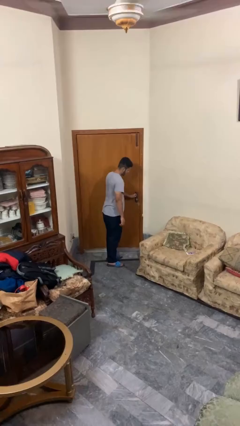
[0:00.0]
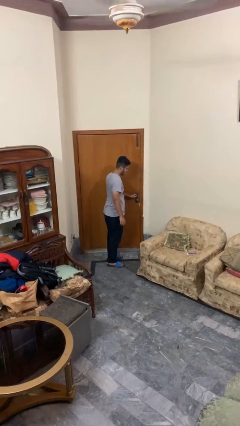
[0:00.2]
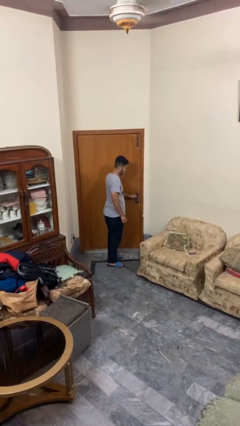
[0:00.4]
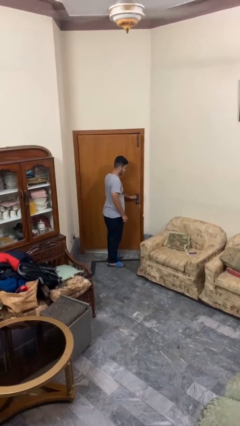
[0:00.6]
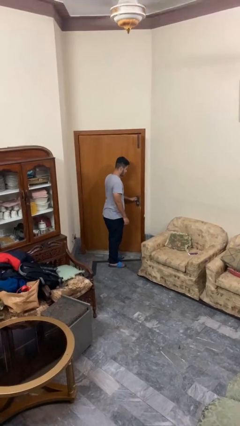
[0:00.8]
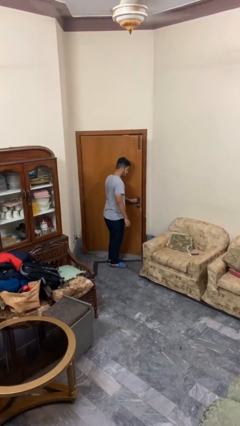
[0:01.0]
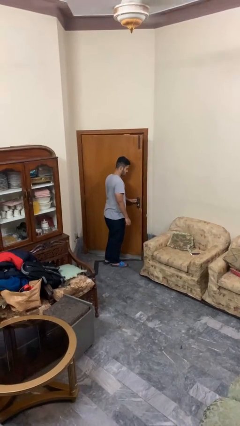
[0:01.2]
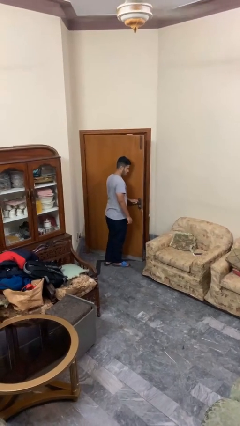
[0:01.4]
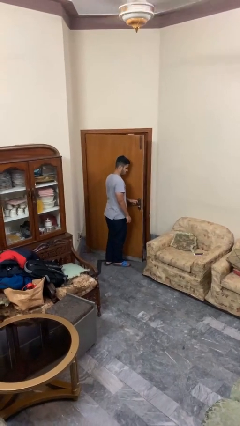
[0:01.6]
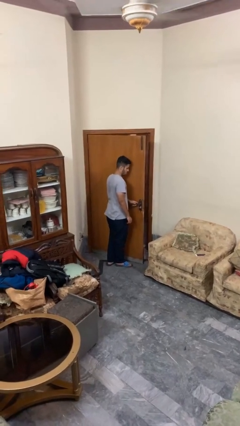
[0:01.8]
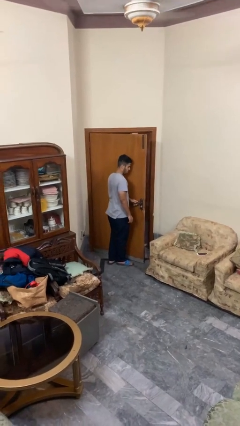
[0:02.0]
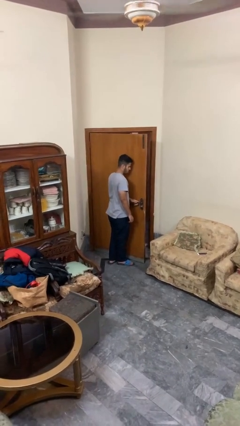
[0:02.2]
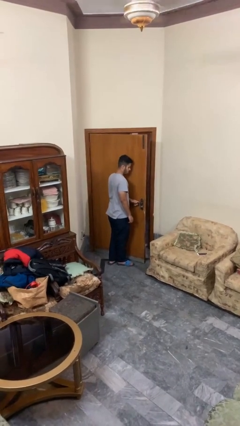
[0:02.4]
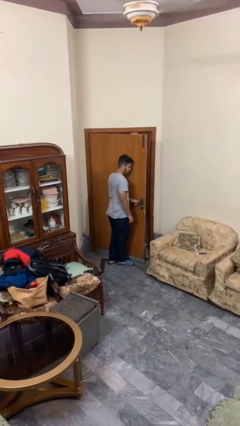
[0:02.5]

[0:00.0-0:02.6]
person opens facility door

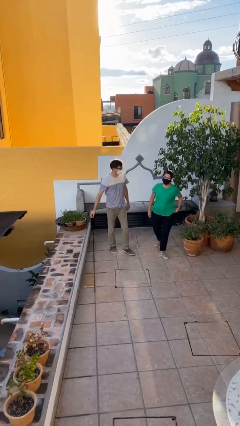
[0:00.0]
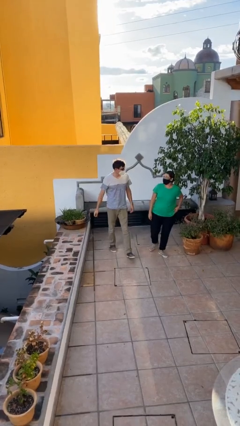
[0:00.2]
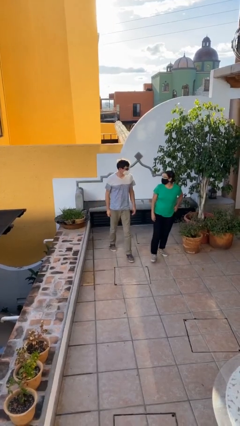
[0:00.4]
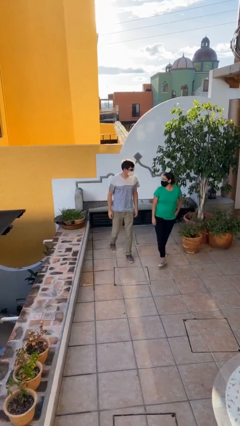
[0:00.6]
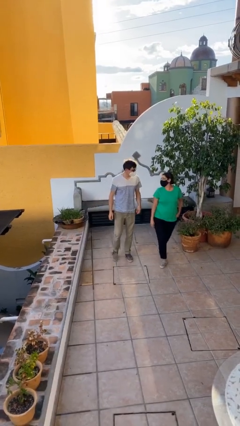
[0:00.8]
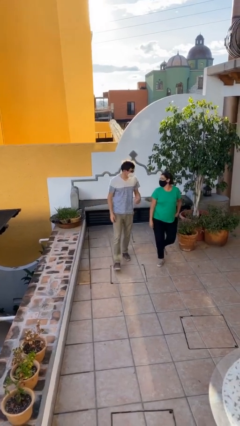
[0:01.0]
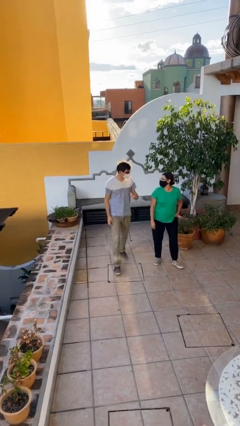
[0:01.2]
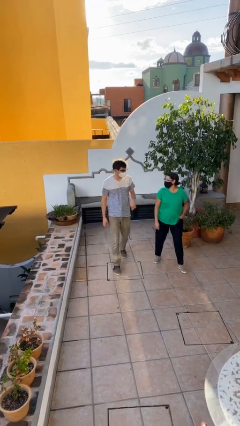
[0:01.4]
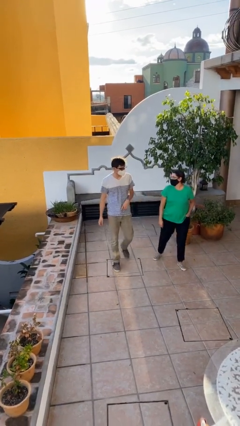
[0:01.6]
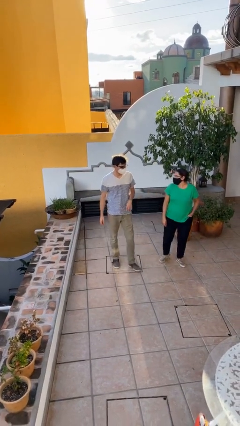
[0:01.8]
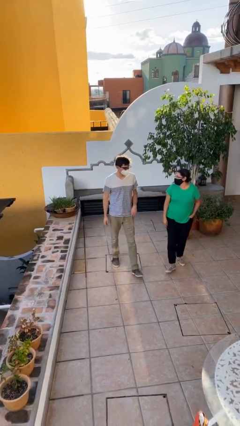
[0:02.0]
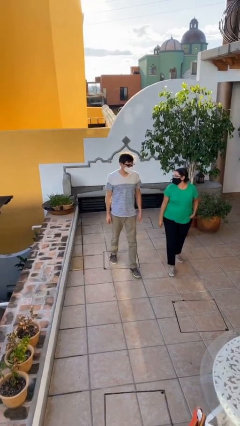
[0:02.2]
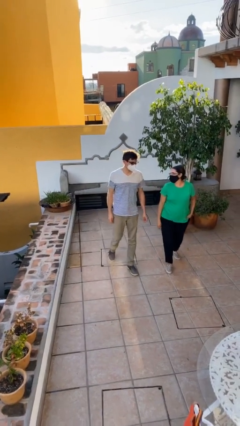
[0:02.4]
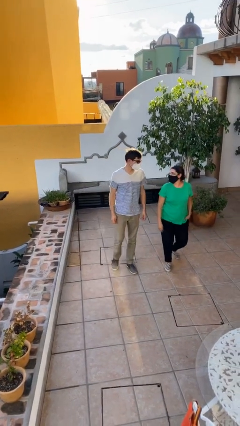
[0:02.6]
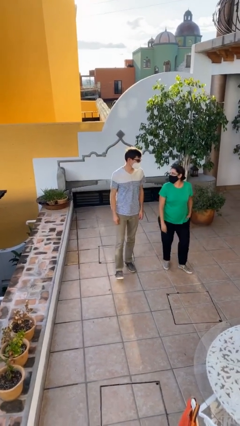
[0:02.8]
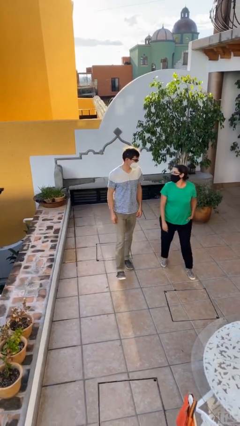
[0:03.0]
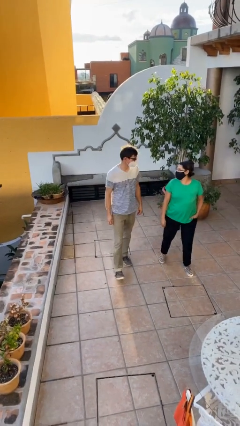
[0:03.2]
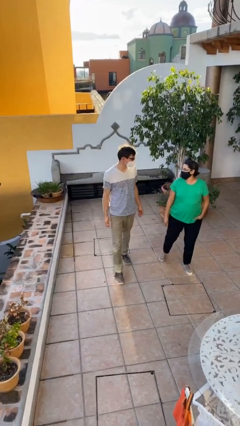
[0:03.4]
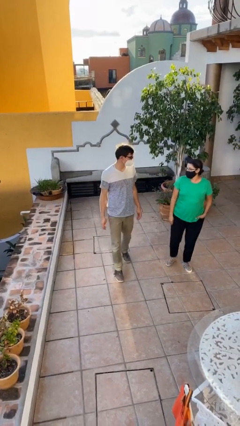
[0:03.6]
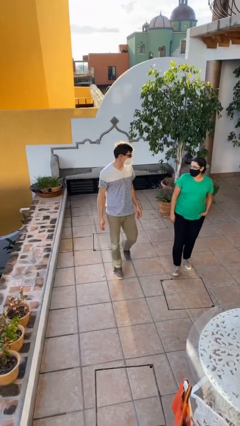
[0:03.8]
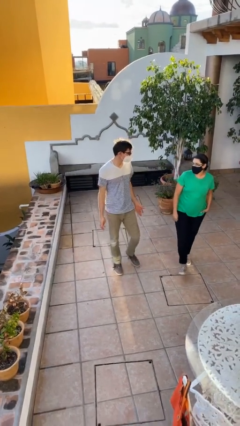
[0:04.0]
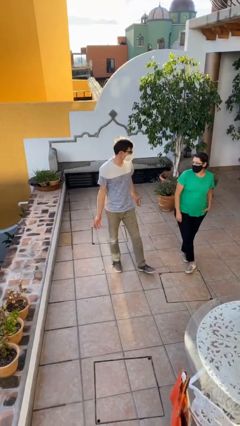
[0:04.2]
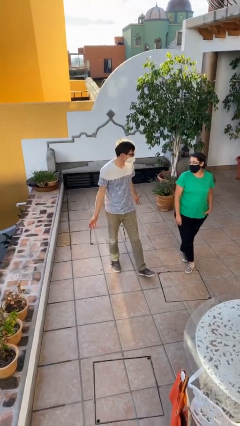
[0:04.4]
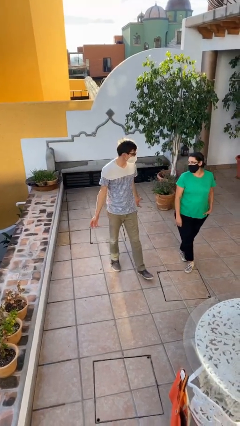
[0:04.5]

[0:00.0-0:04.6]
person talks to person

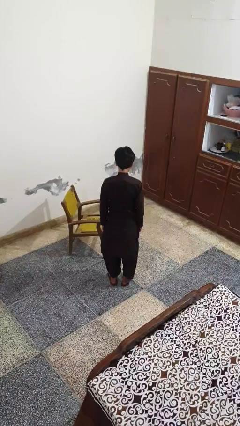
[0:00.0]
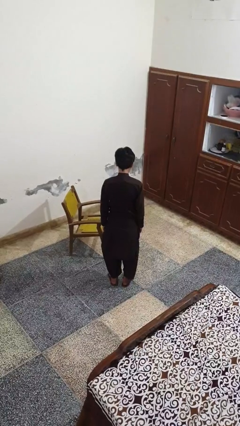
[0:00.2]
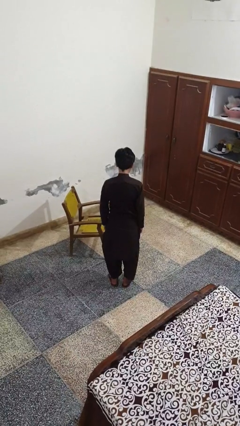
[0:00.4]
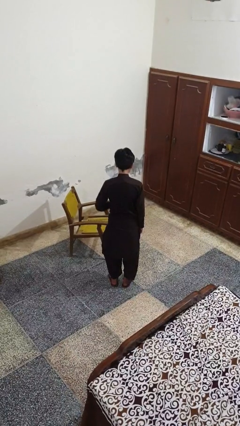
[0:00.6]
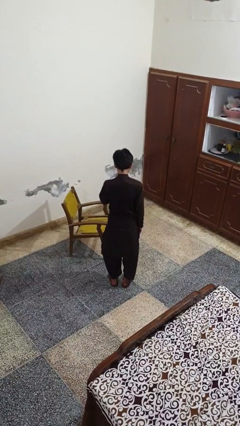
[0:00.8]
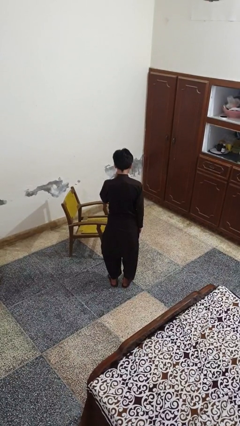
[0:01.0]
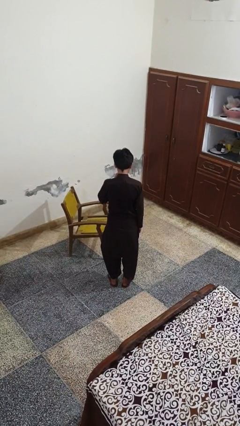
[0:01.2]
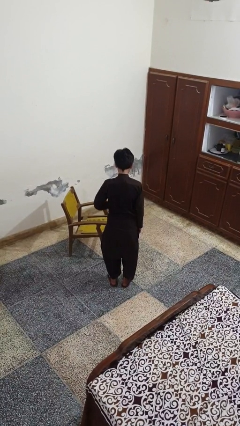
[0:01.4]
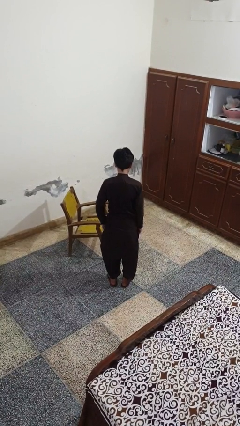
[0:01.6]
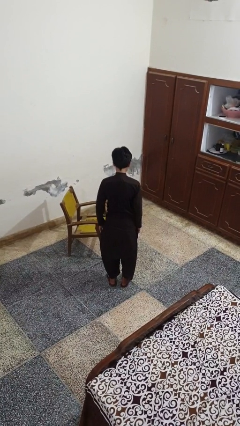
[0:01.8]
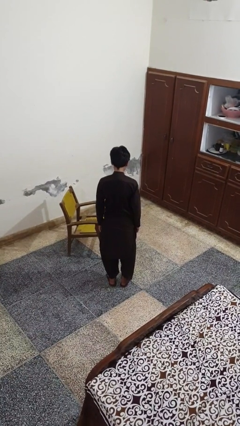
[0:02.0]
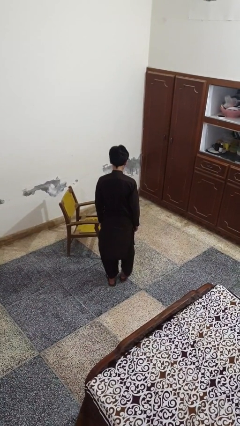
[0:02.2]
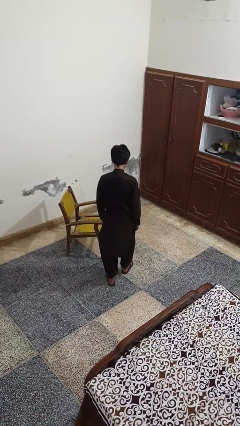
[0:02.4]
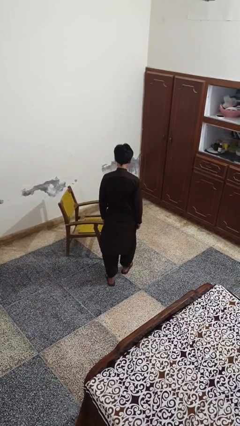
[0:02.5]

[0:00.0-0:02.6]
person puts phone into pocket

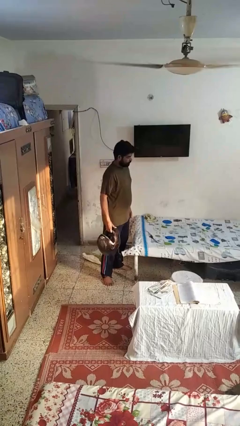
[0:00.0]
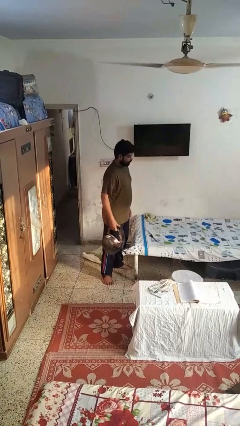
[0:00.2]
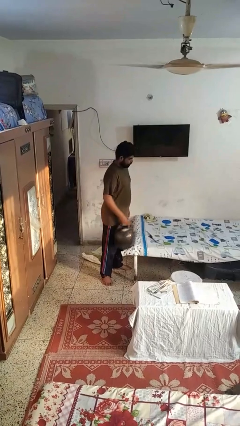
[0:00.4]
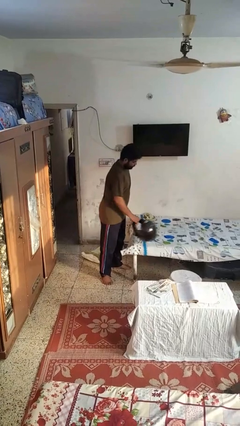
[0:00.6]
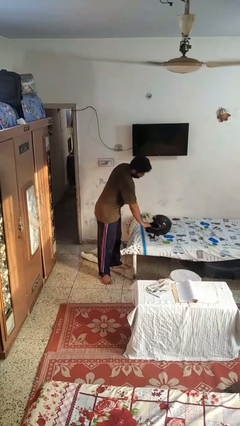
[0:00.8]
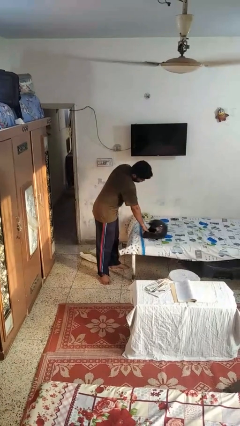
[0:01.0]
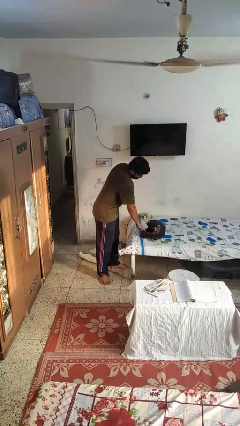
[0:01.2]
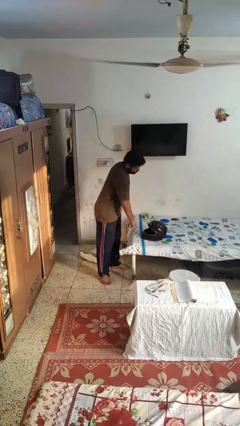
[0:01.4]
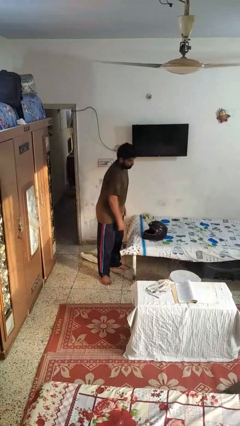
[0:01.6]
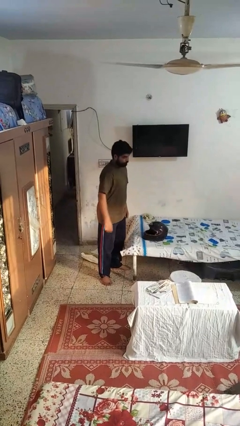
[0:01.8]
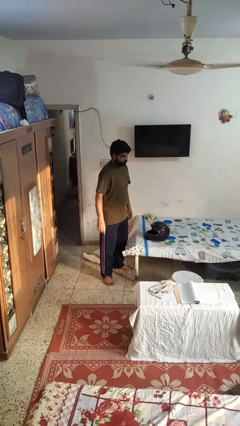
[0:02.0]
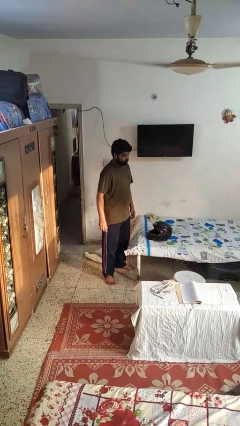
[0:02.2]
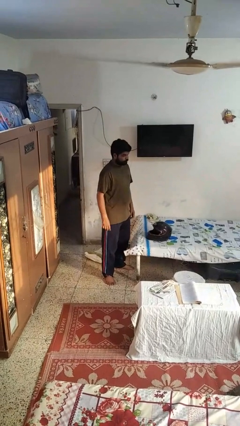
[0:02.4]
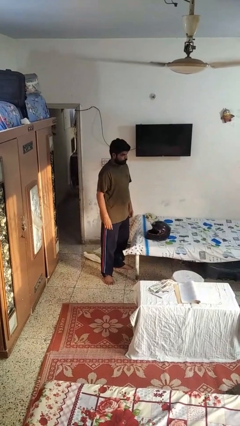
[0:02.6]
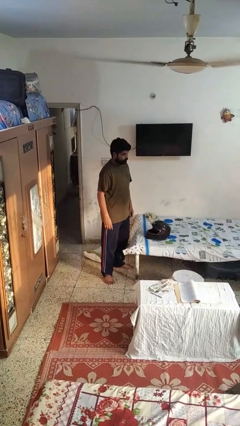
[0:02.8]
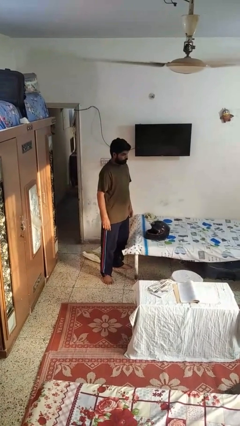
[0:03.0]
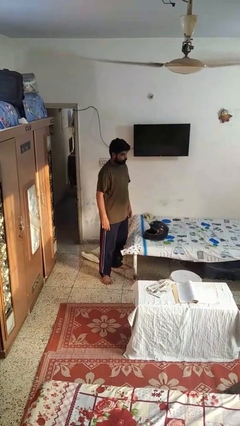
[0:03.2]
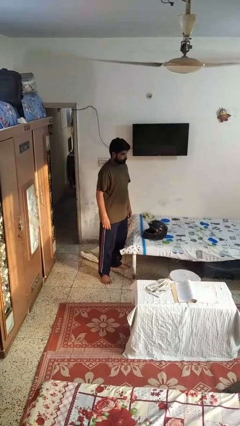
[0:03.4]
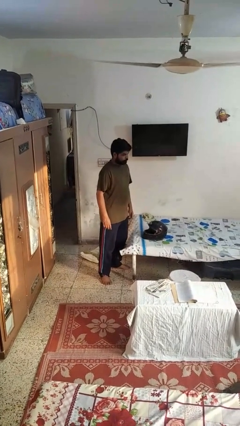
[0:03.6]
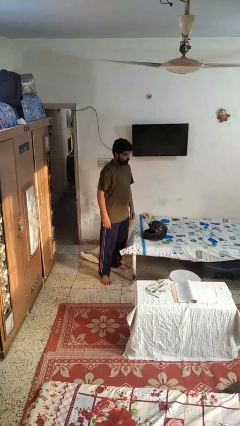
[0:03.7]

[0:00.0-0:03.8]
person puts down object on bed

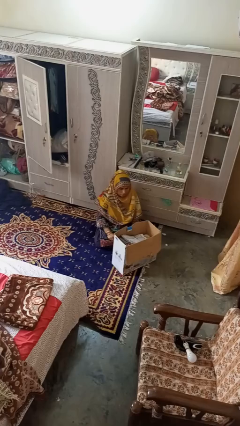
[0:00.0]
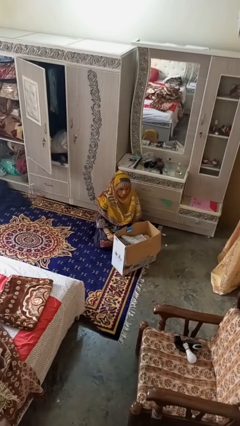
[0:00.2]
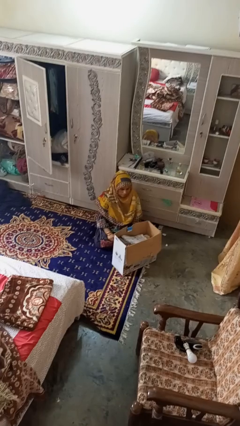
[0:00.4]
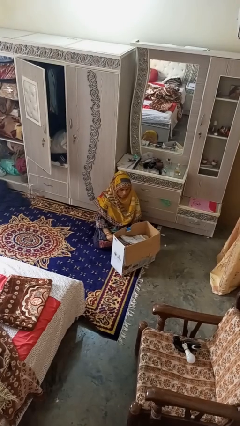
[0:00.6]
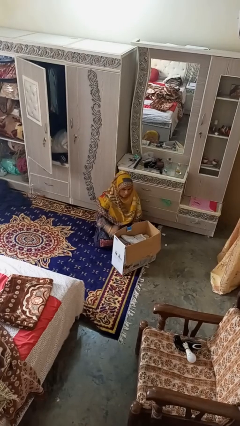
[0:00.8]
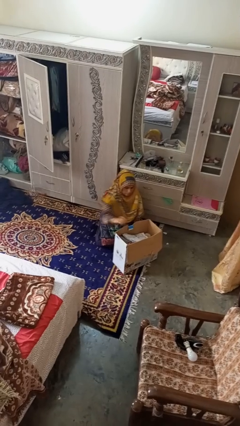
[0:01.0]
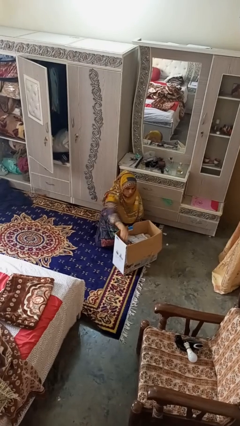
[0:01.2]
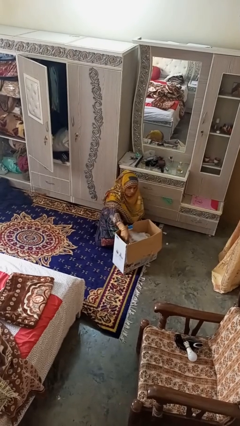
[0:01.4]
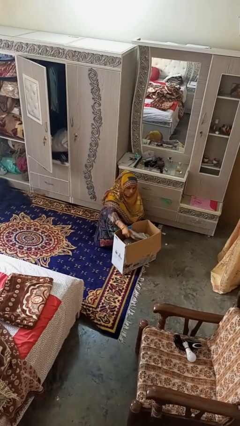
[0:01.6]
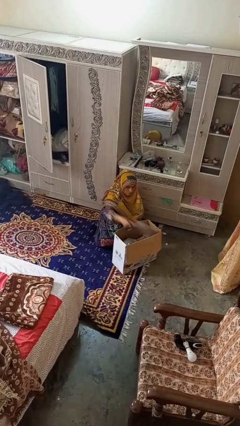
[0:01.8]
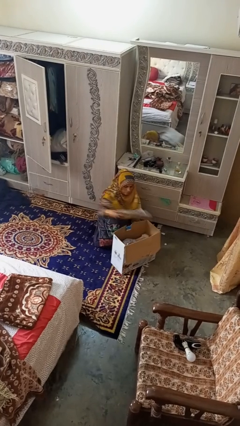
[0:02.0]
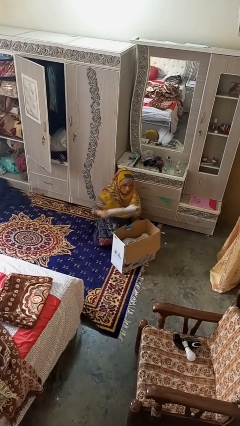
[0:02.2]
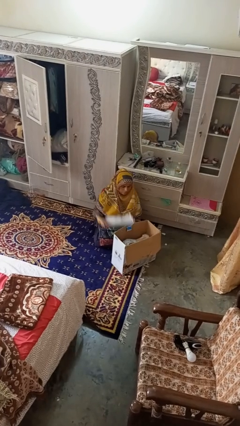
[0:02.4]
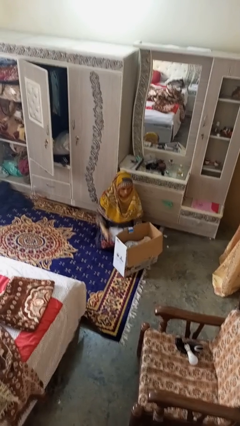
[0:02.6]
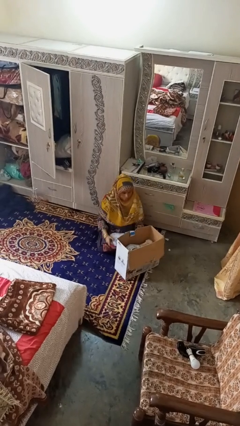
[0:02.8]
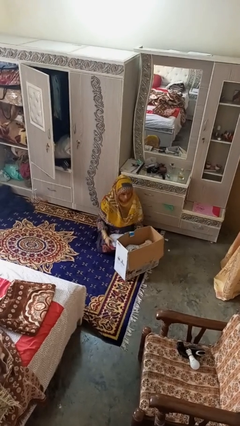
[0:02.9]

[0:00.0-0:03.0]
person takes object from box

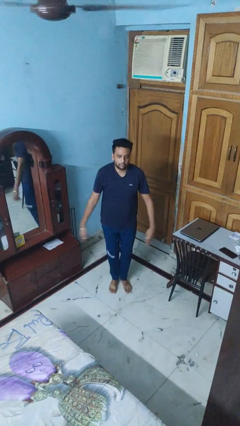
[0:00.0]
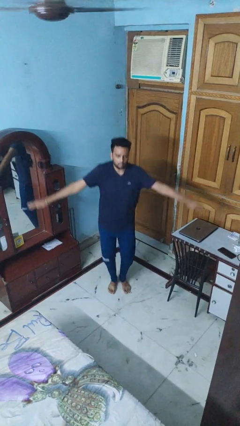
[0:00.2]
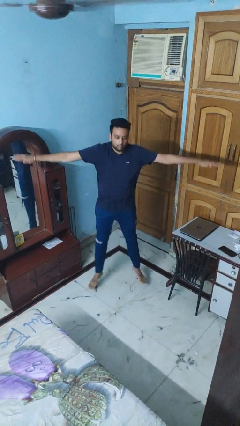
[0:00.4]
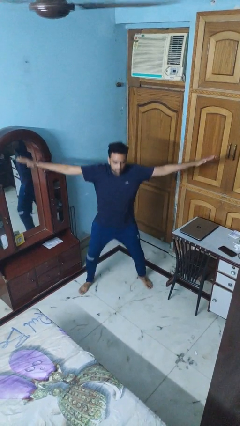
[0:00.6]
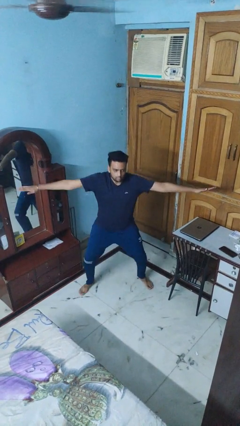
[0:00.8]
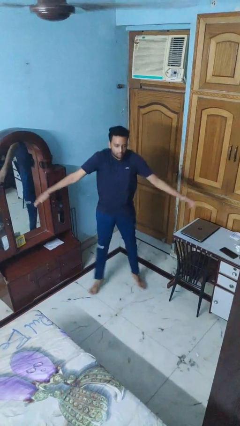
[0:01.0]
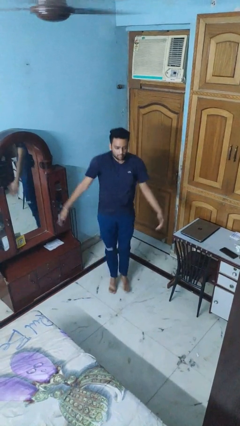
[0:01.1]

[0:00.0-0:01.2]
person exercises with jumping jacks
